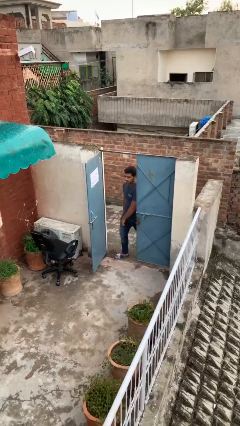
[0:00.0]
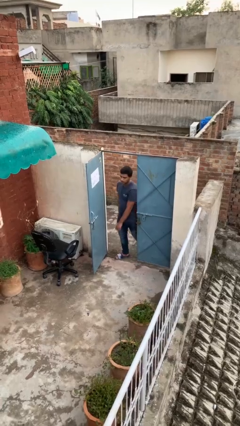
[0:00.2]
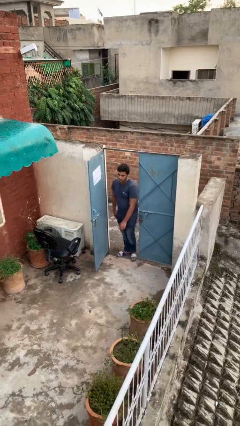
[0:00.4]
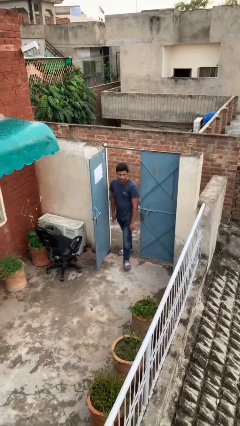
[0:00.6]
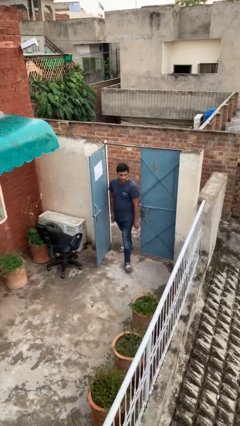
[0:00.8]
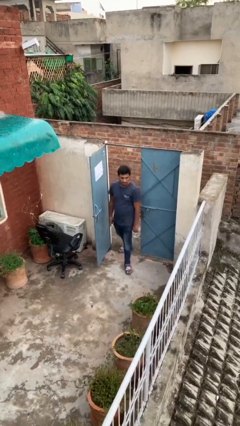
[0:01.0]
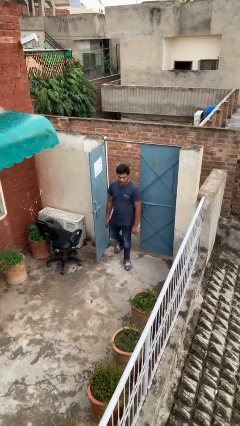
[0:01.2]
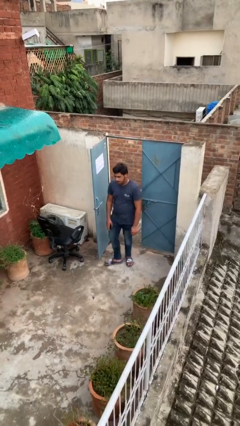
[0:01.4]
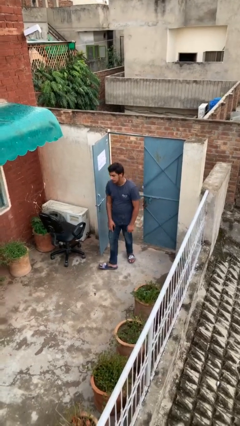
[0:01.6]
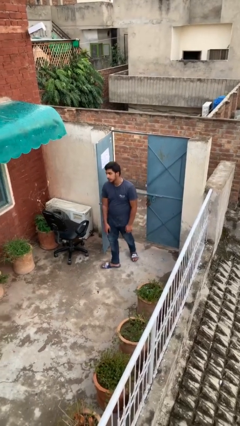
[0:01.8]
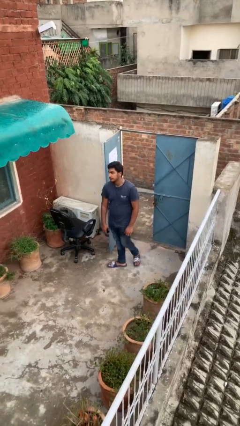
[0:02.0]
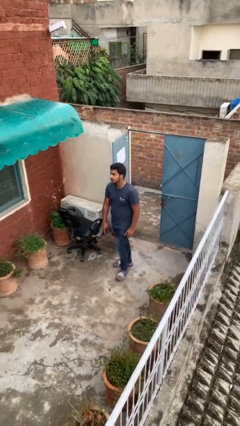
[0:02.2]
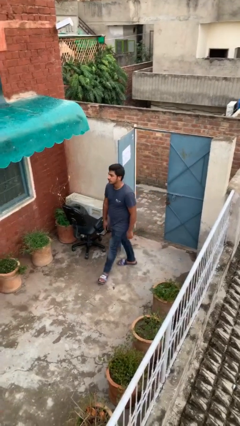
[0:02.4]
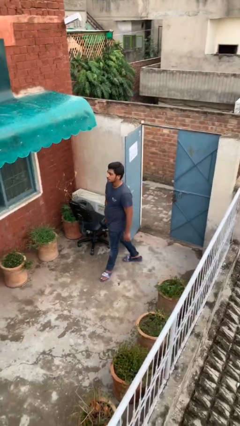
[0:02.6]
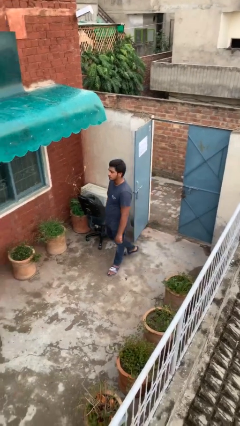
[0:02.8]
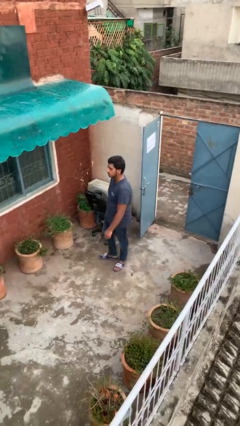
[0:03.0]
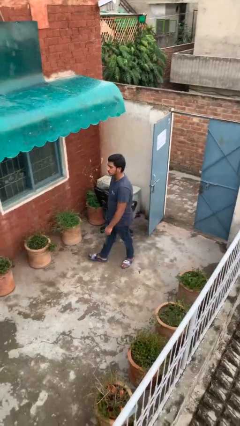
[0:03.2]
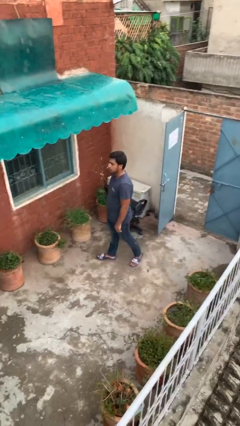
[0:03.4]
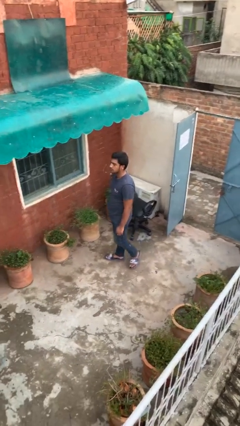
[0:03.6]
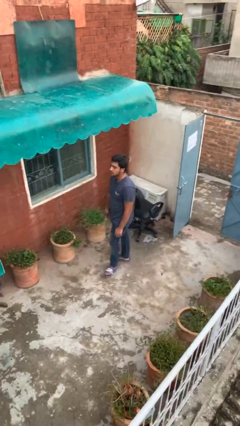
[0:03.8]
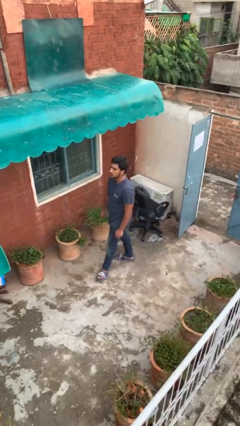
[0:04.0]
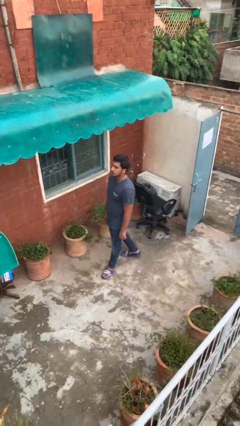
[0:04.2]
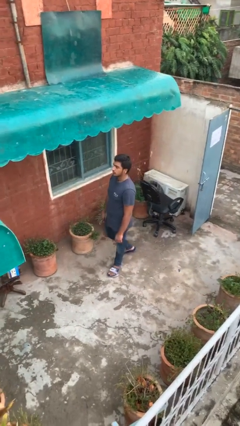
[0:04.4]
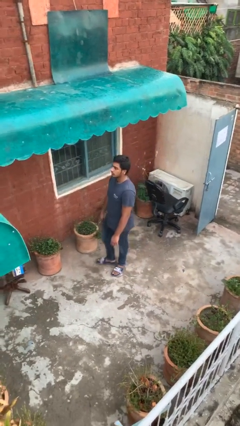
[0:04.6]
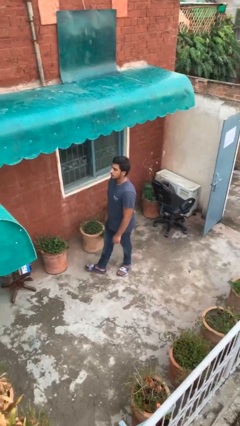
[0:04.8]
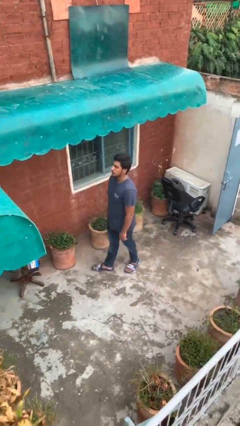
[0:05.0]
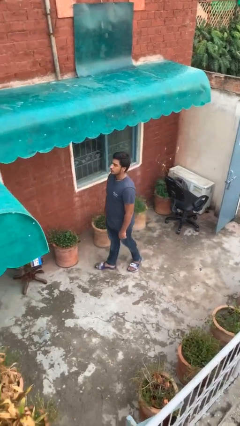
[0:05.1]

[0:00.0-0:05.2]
person enters scene through structure

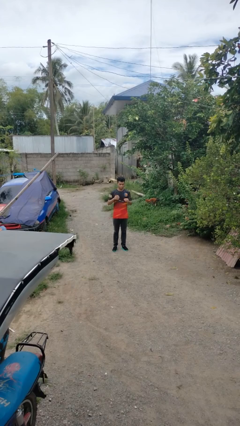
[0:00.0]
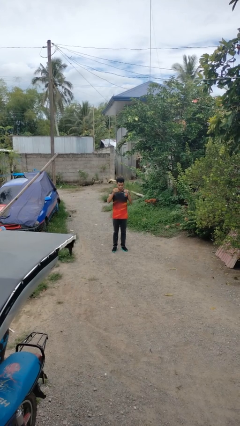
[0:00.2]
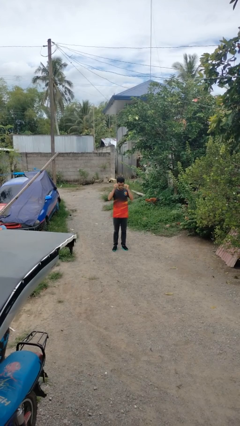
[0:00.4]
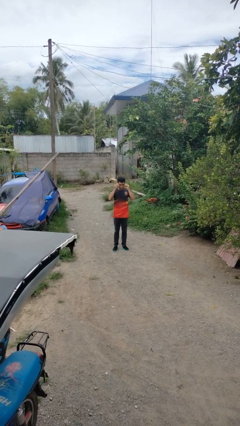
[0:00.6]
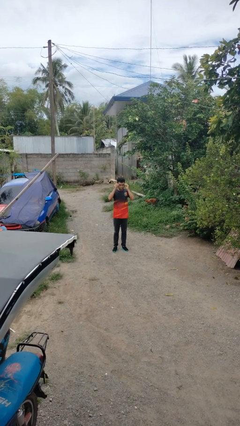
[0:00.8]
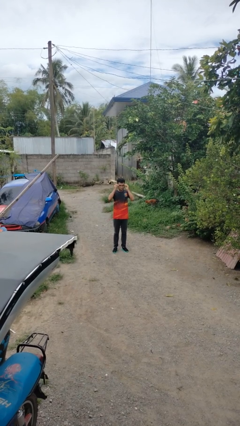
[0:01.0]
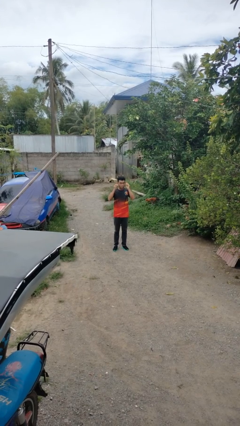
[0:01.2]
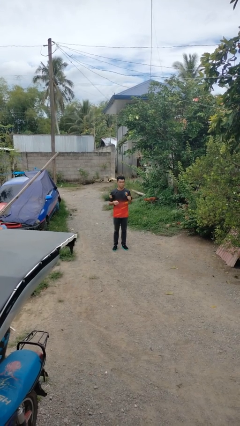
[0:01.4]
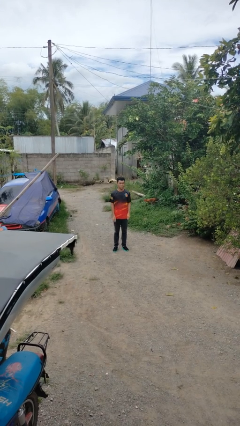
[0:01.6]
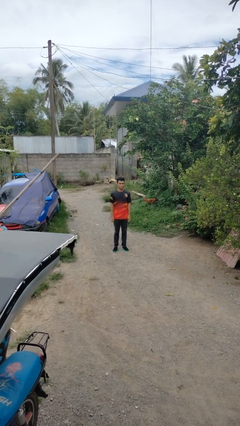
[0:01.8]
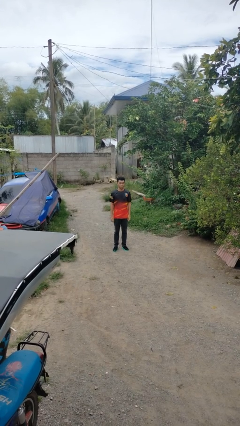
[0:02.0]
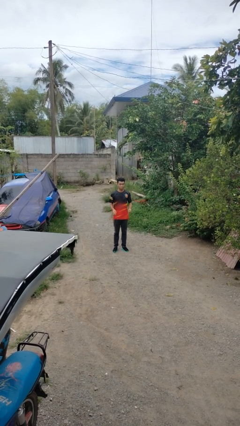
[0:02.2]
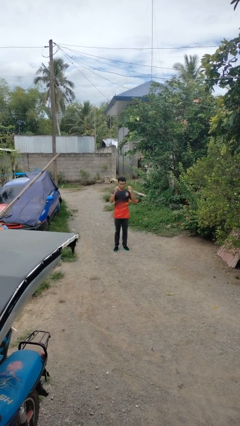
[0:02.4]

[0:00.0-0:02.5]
person puts on glasses

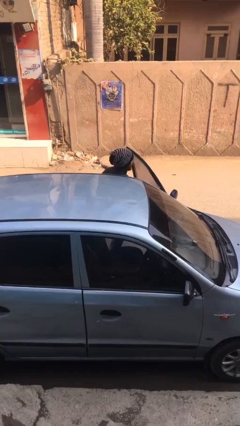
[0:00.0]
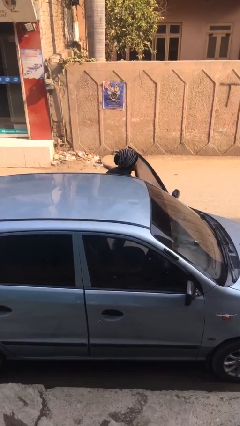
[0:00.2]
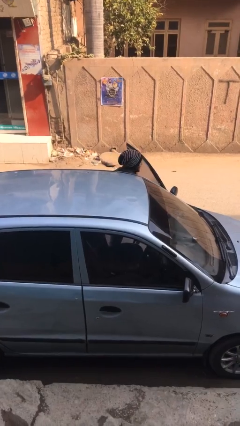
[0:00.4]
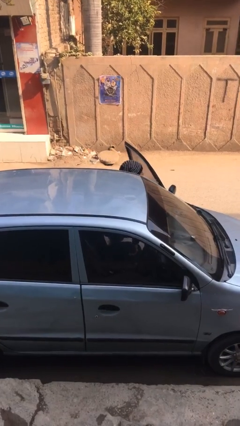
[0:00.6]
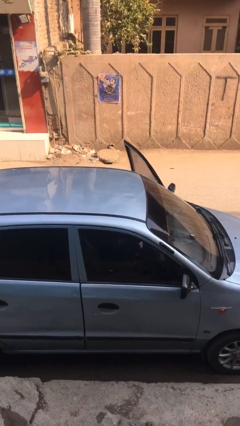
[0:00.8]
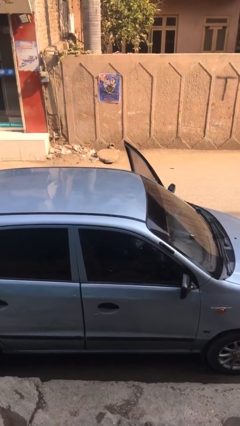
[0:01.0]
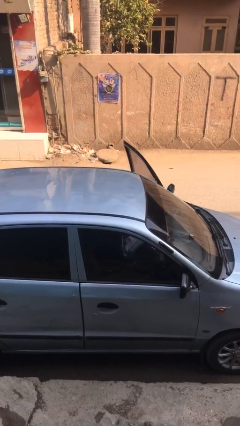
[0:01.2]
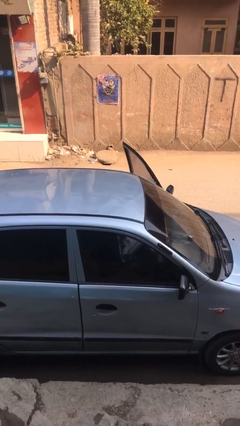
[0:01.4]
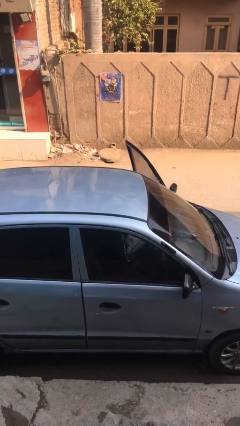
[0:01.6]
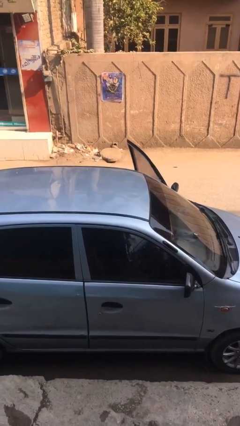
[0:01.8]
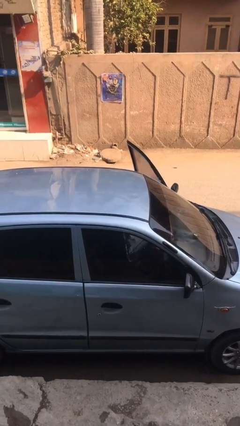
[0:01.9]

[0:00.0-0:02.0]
person enters car

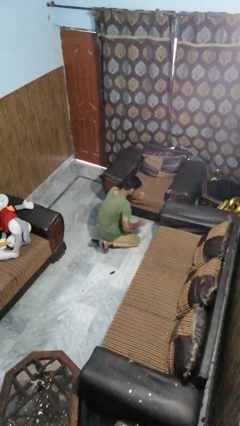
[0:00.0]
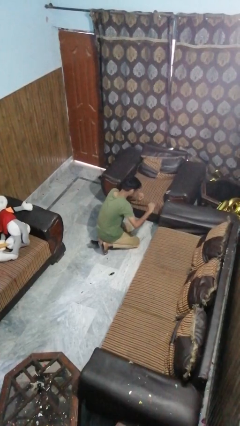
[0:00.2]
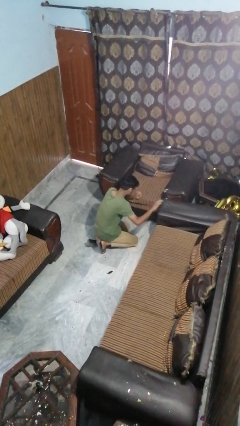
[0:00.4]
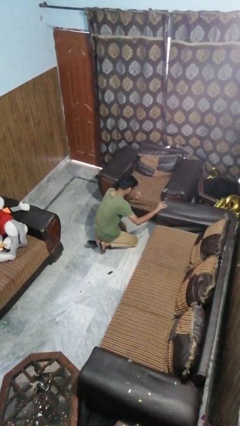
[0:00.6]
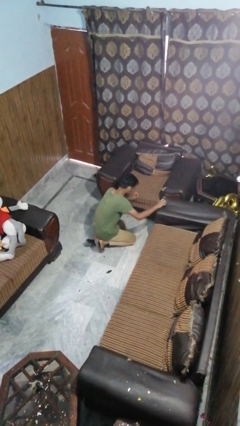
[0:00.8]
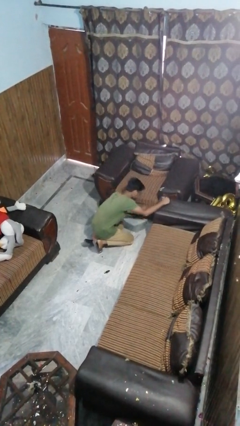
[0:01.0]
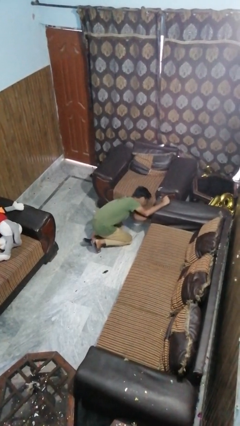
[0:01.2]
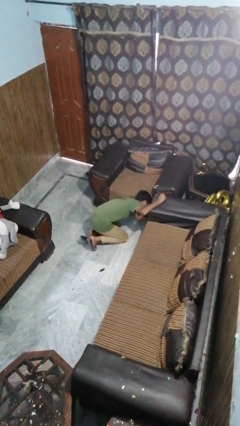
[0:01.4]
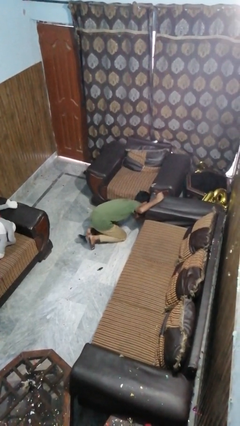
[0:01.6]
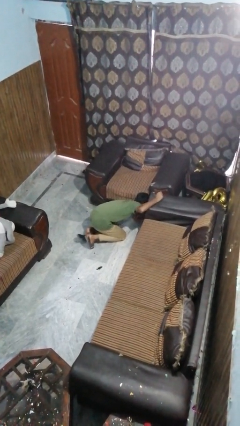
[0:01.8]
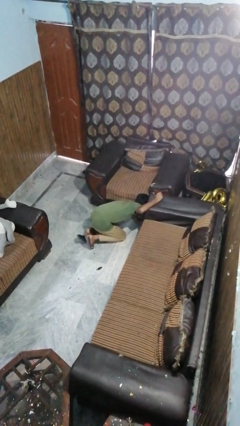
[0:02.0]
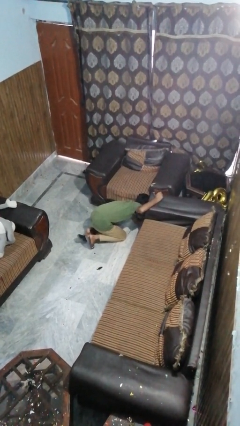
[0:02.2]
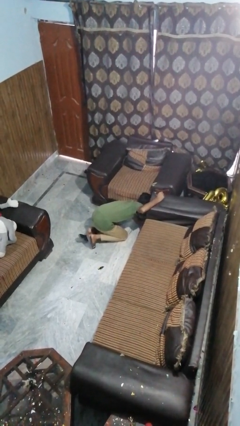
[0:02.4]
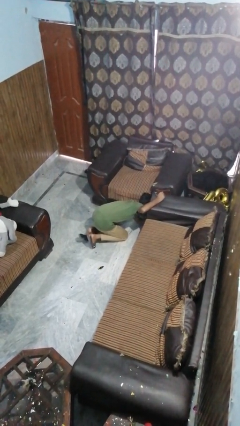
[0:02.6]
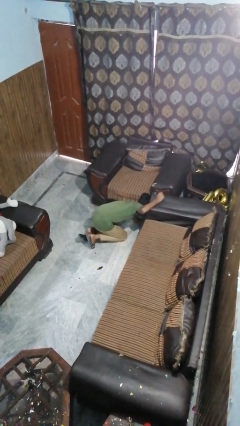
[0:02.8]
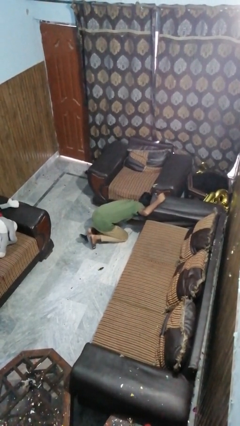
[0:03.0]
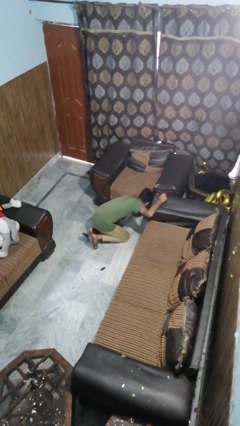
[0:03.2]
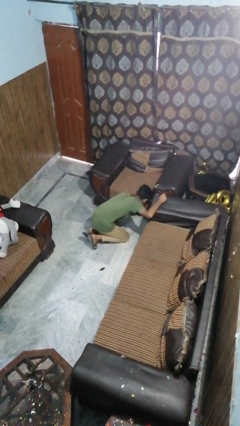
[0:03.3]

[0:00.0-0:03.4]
person searches under couch

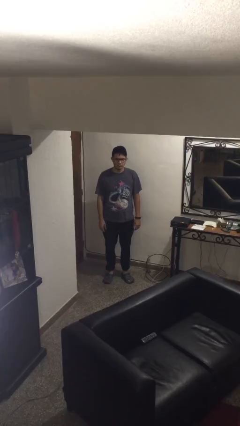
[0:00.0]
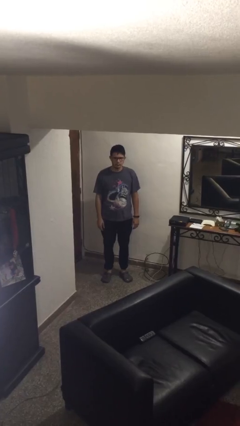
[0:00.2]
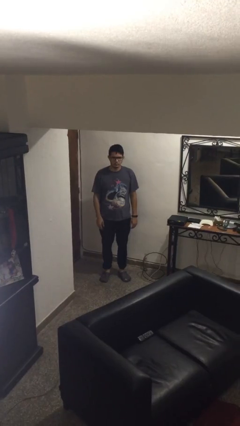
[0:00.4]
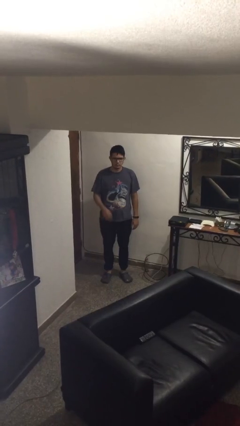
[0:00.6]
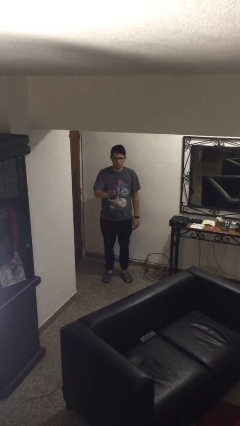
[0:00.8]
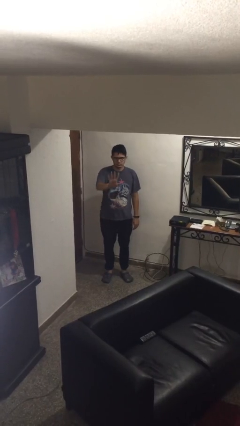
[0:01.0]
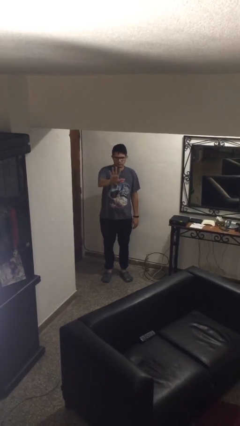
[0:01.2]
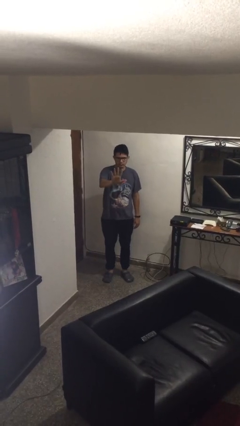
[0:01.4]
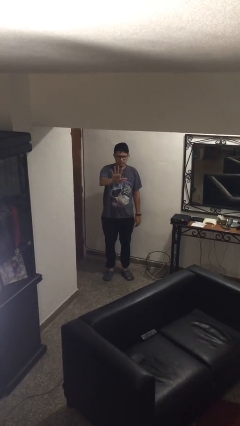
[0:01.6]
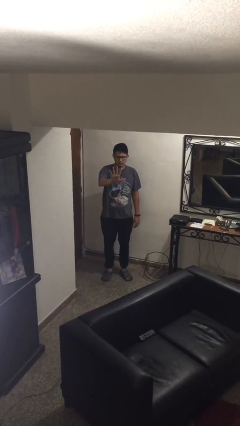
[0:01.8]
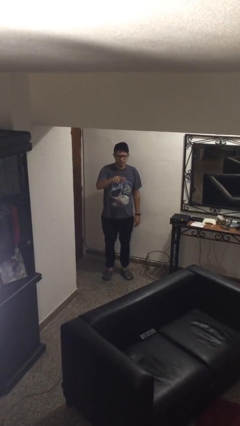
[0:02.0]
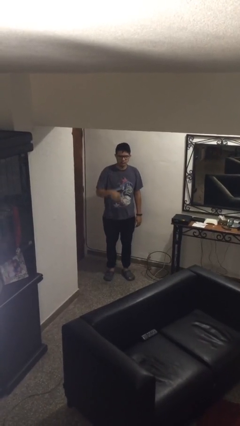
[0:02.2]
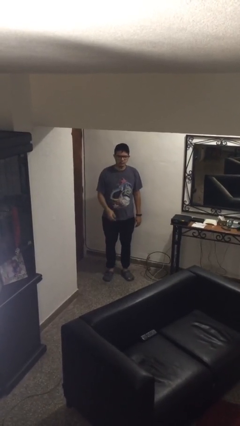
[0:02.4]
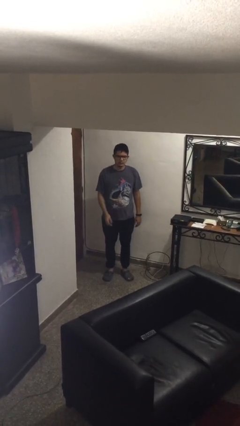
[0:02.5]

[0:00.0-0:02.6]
person gestures number five

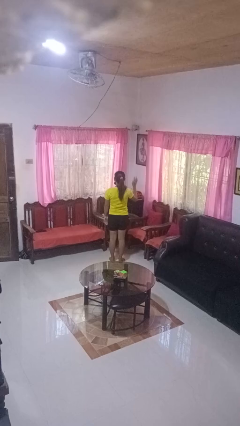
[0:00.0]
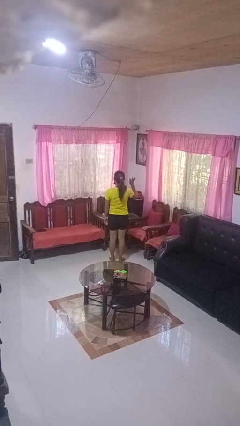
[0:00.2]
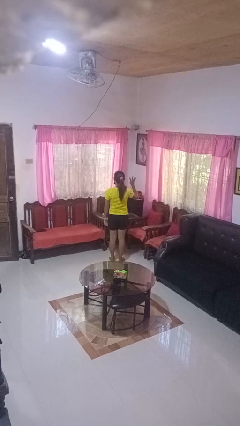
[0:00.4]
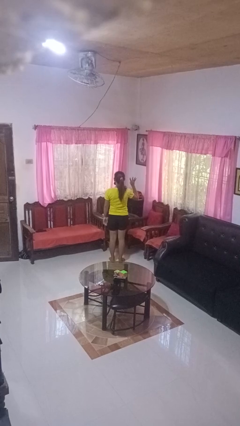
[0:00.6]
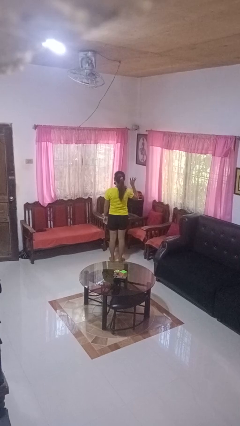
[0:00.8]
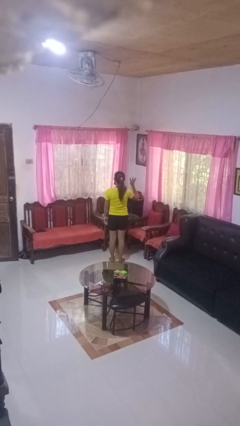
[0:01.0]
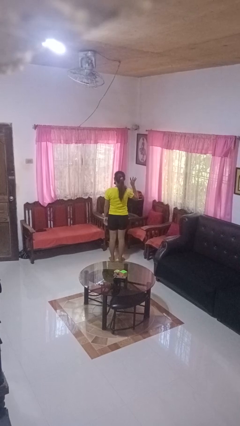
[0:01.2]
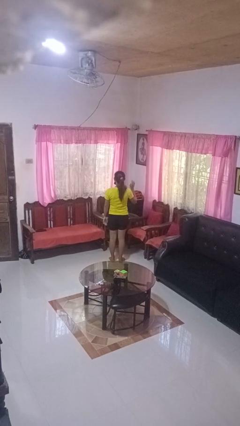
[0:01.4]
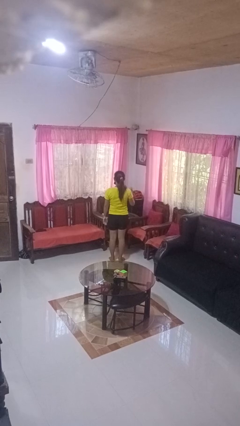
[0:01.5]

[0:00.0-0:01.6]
person gestures number four
